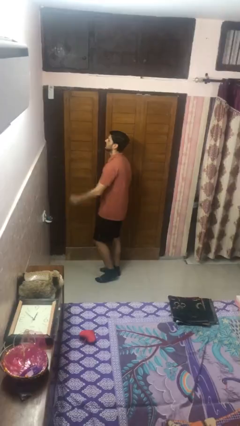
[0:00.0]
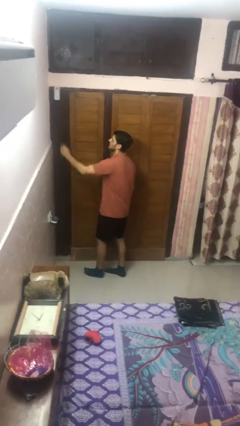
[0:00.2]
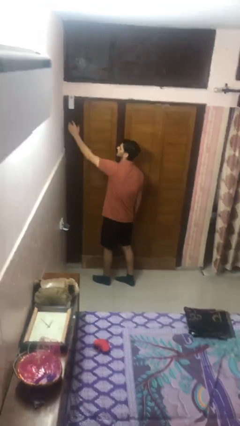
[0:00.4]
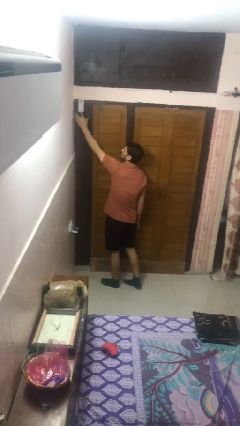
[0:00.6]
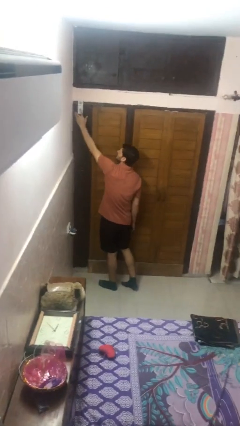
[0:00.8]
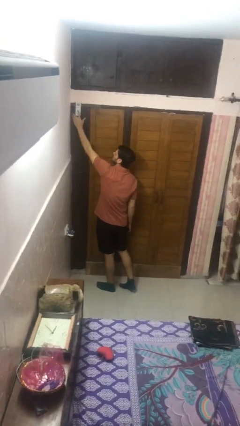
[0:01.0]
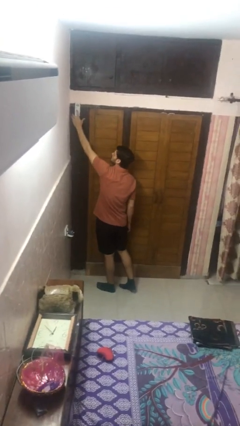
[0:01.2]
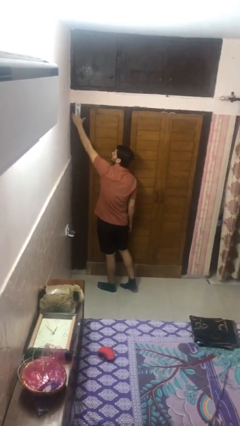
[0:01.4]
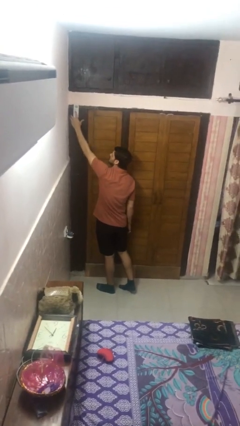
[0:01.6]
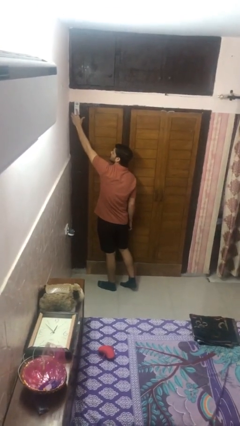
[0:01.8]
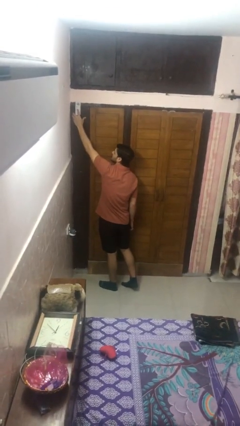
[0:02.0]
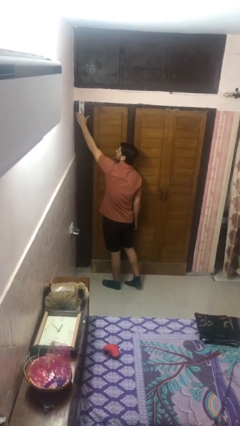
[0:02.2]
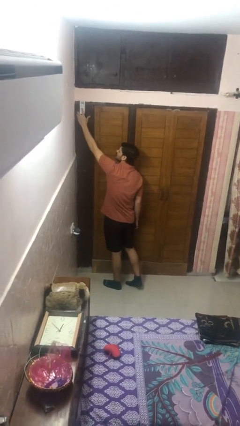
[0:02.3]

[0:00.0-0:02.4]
person adjusts thermostat

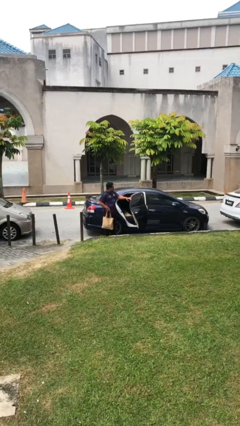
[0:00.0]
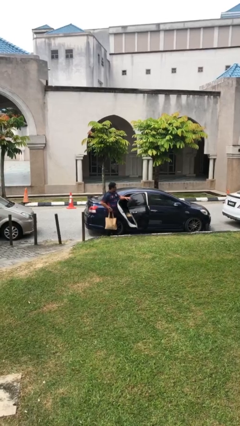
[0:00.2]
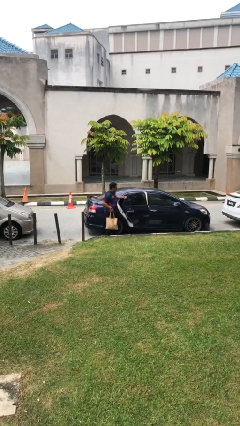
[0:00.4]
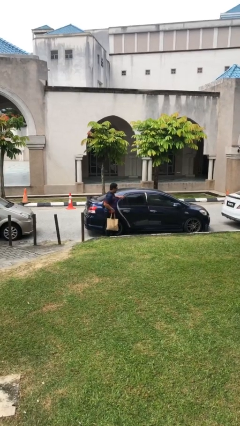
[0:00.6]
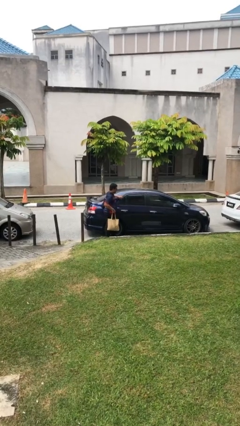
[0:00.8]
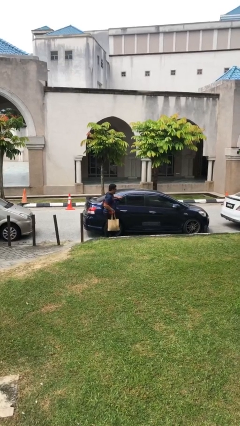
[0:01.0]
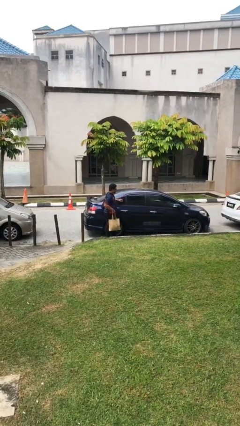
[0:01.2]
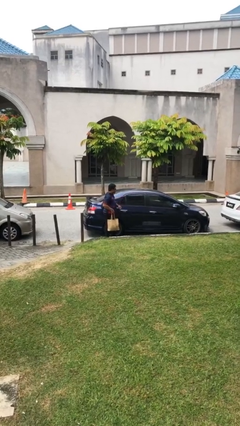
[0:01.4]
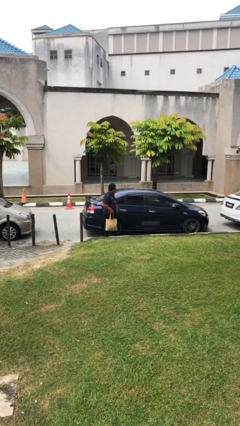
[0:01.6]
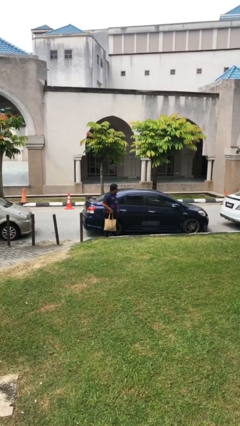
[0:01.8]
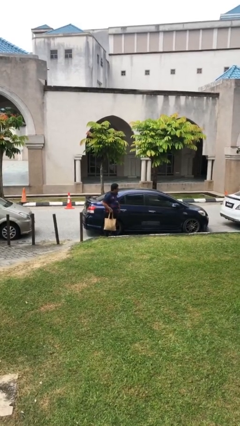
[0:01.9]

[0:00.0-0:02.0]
person closes car door

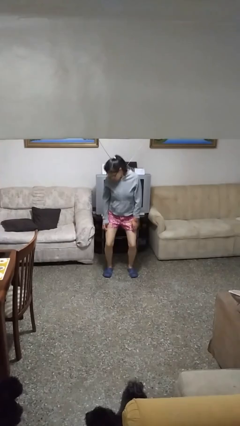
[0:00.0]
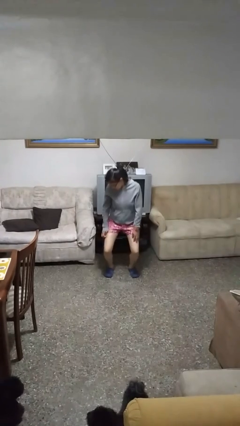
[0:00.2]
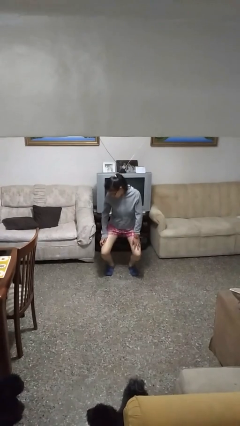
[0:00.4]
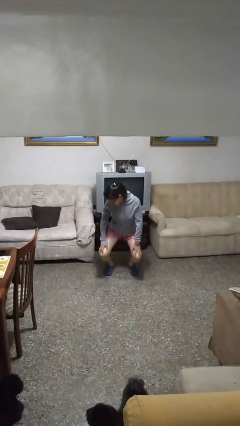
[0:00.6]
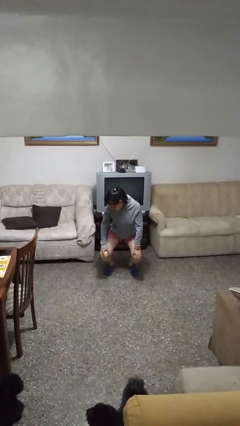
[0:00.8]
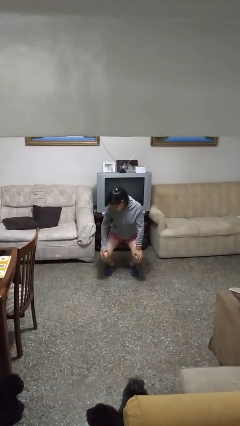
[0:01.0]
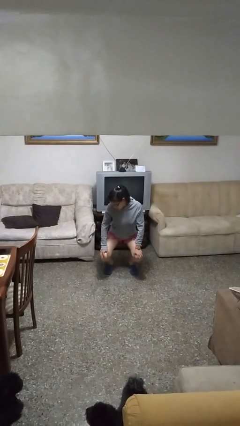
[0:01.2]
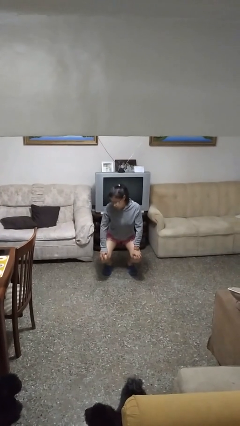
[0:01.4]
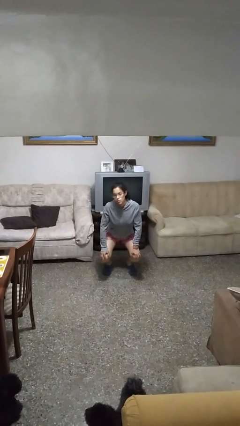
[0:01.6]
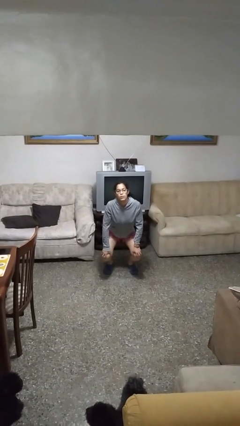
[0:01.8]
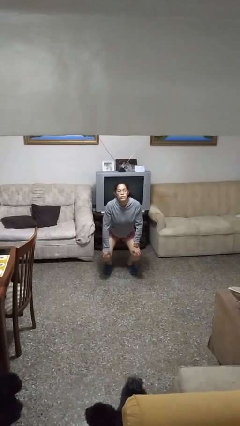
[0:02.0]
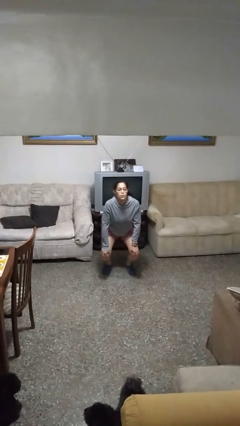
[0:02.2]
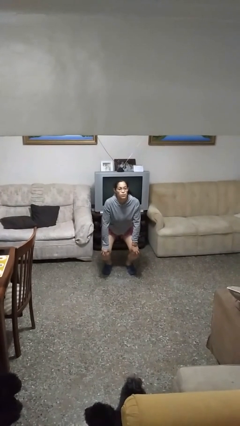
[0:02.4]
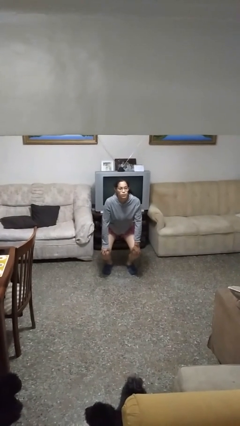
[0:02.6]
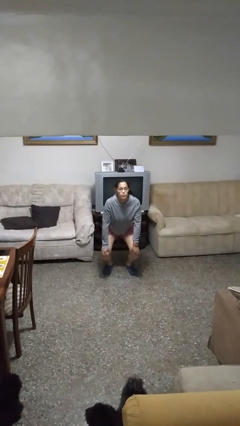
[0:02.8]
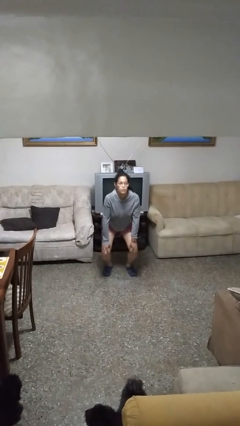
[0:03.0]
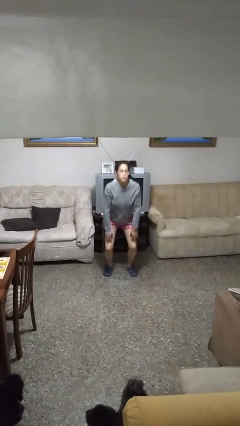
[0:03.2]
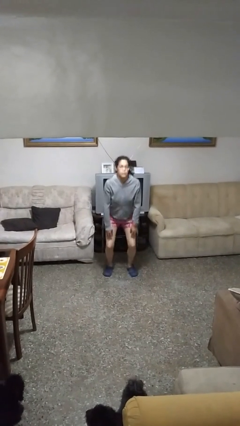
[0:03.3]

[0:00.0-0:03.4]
person squats

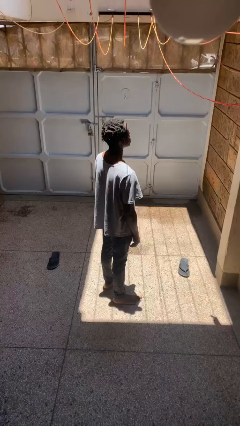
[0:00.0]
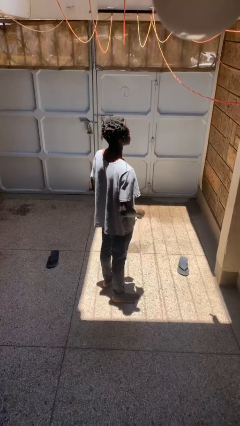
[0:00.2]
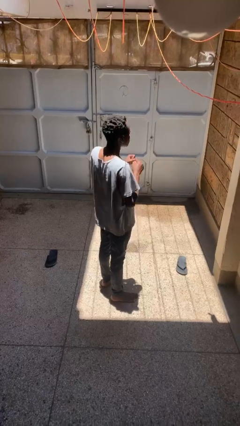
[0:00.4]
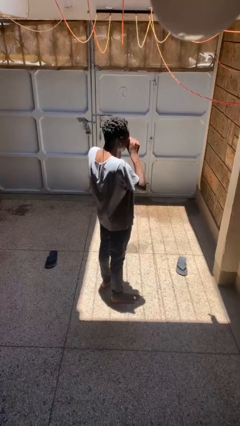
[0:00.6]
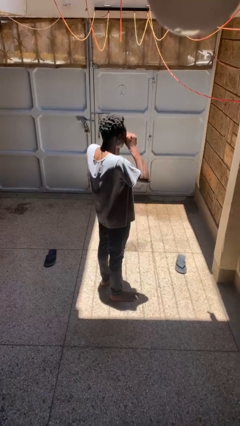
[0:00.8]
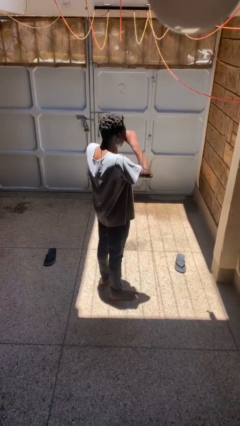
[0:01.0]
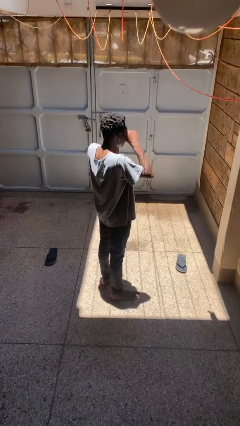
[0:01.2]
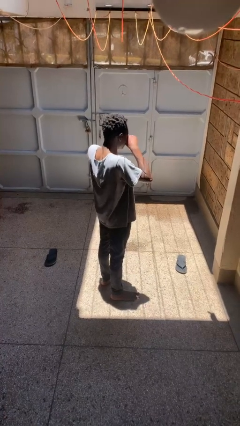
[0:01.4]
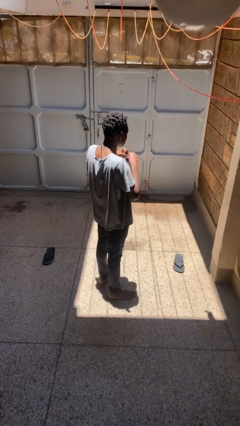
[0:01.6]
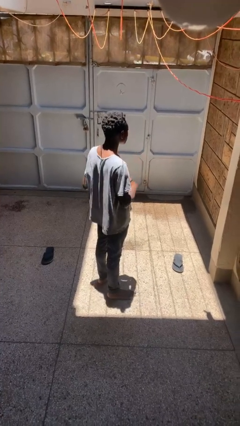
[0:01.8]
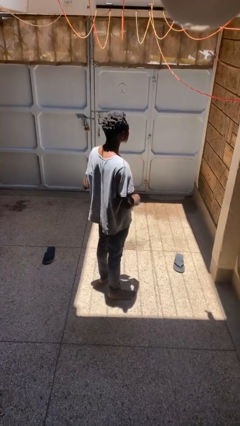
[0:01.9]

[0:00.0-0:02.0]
person rubs eyes

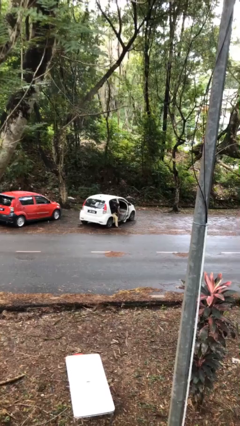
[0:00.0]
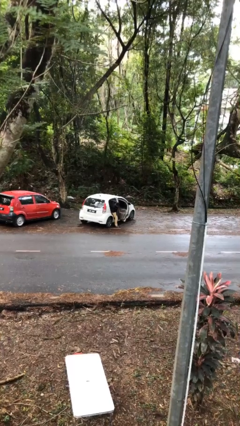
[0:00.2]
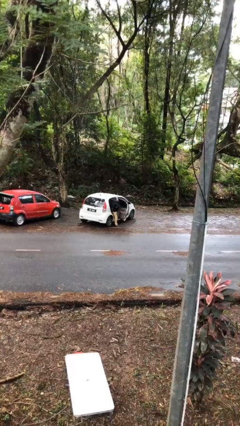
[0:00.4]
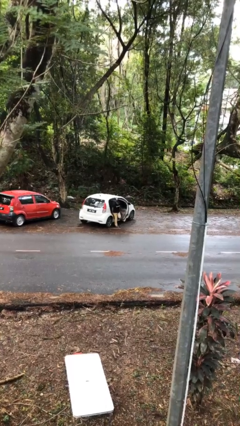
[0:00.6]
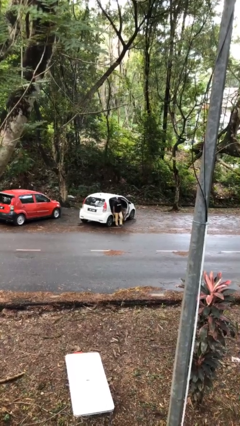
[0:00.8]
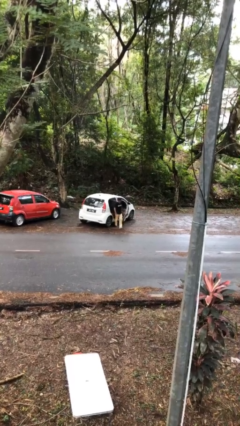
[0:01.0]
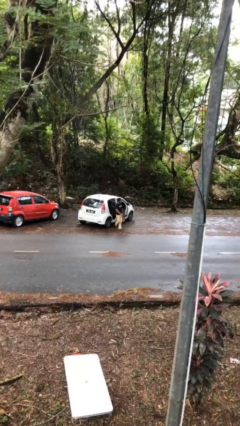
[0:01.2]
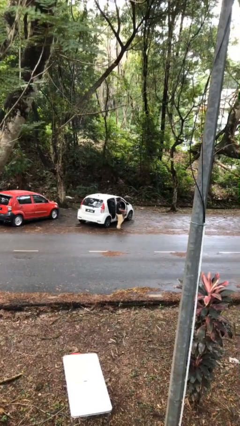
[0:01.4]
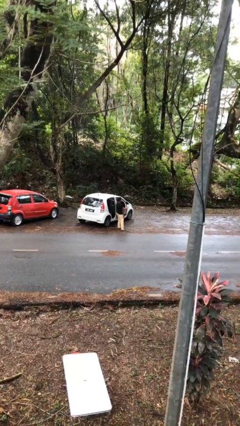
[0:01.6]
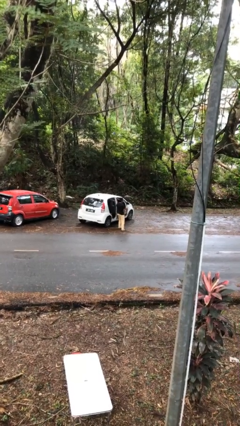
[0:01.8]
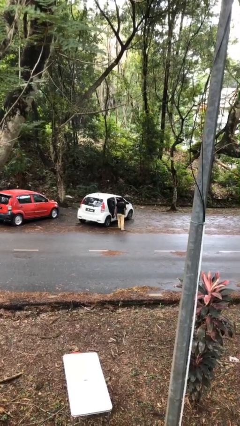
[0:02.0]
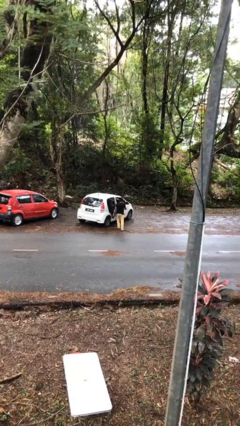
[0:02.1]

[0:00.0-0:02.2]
person exits car

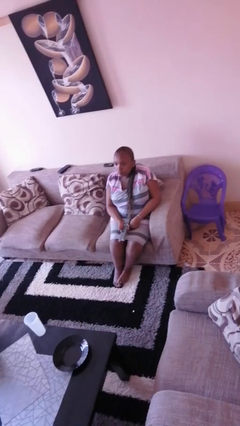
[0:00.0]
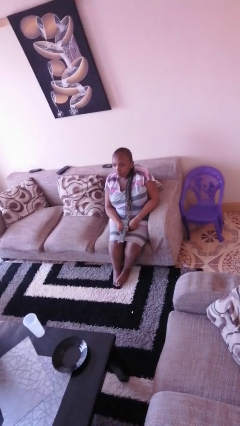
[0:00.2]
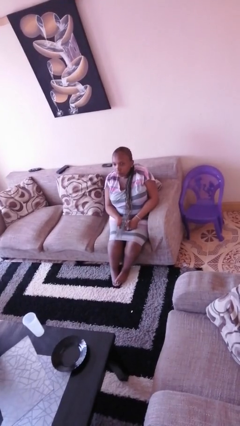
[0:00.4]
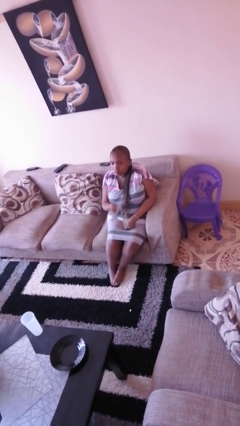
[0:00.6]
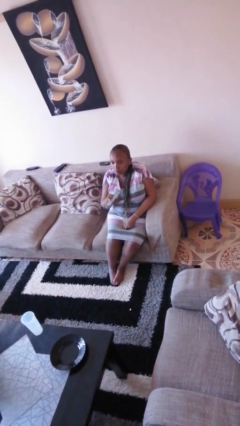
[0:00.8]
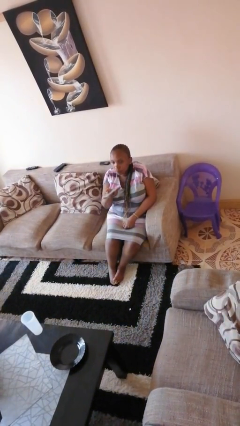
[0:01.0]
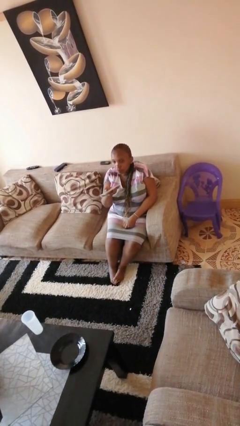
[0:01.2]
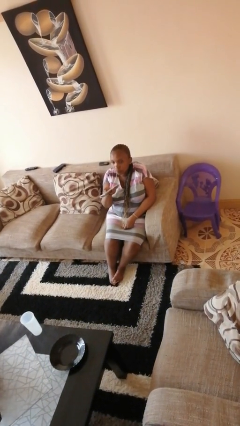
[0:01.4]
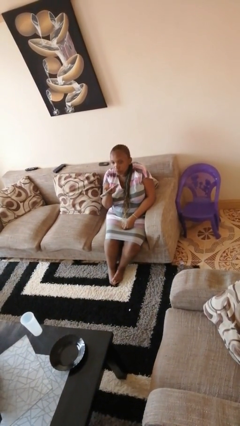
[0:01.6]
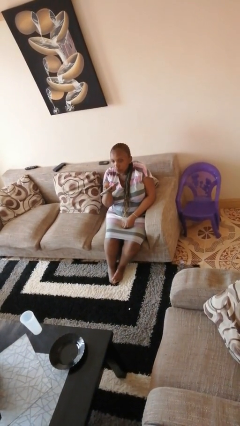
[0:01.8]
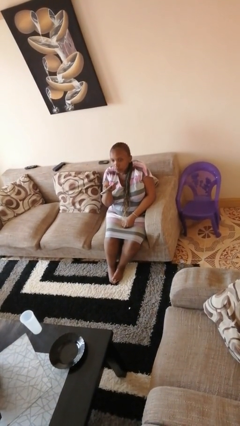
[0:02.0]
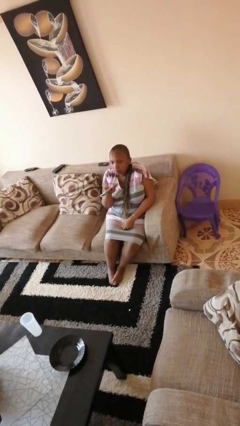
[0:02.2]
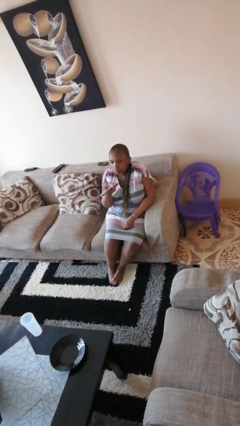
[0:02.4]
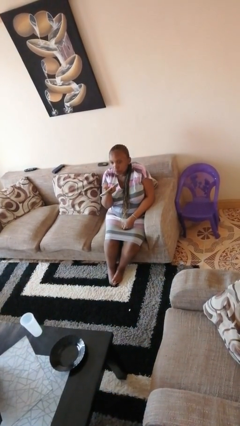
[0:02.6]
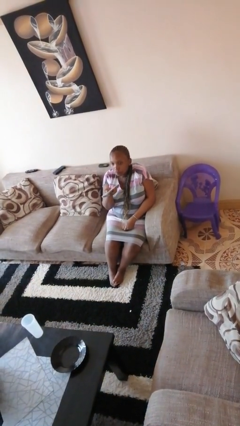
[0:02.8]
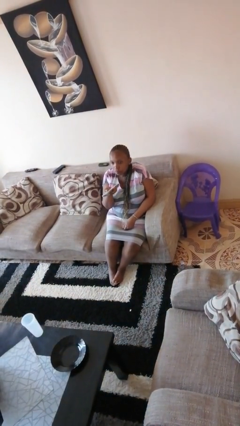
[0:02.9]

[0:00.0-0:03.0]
person uses television remote

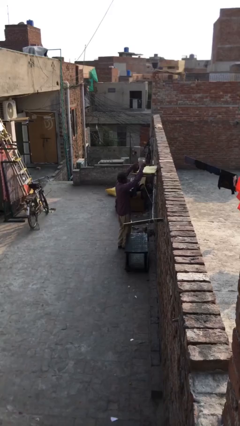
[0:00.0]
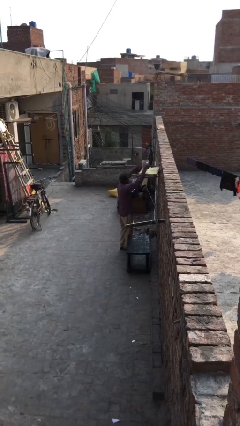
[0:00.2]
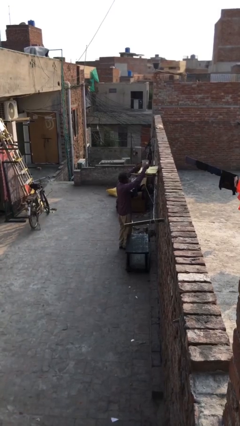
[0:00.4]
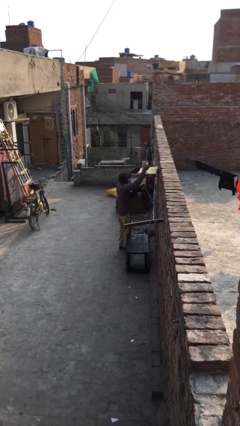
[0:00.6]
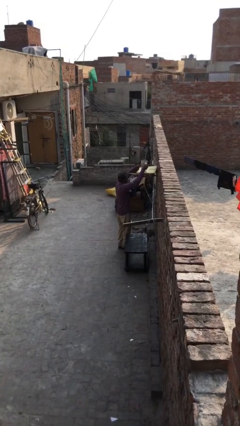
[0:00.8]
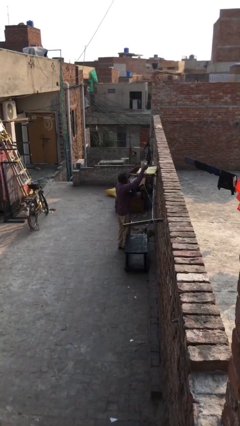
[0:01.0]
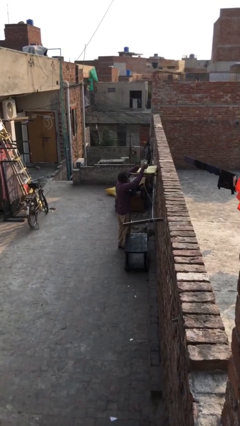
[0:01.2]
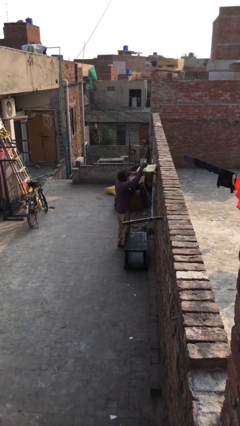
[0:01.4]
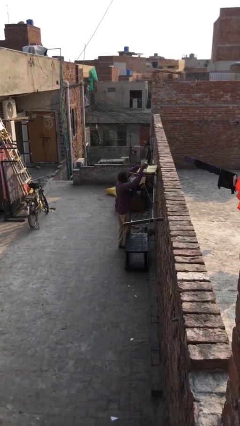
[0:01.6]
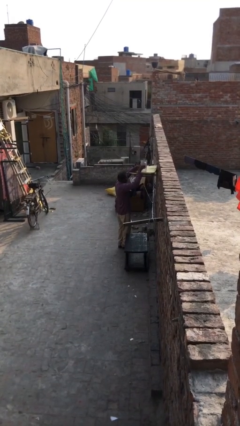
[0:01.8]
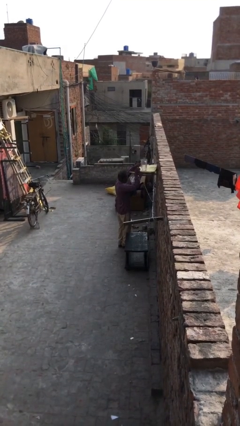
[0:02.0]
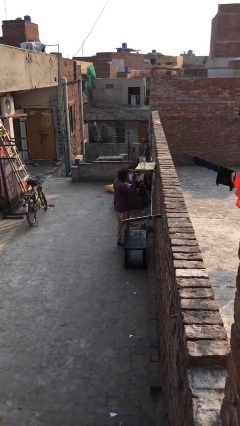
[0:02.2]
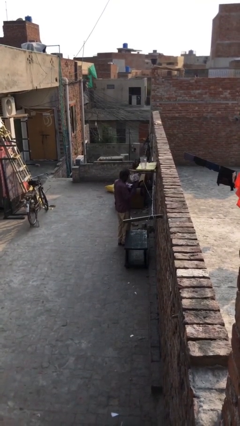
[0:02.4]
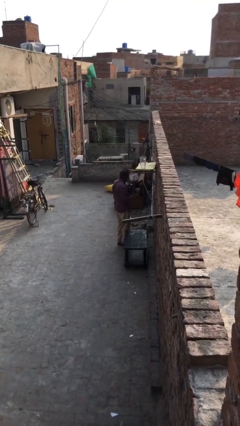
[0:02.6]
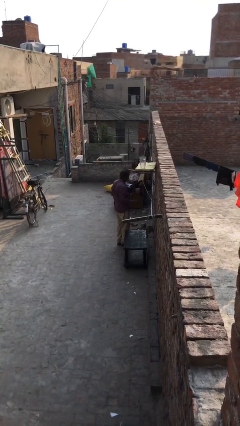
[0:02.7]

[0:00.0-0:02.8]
person puts down object on shelf
